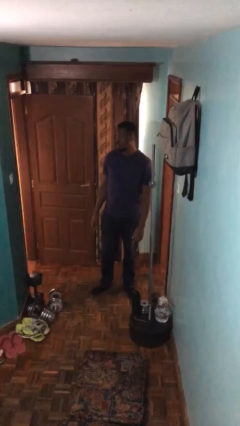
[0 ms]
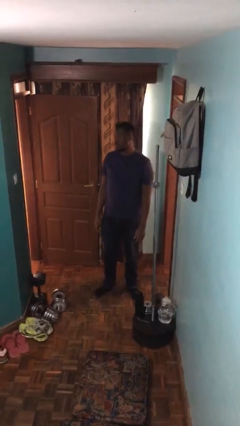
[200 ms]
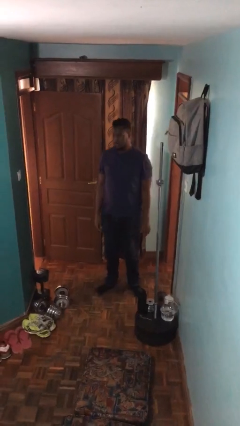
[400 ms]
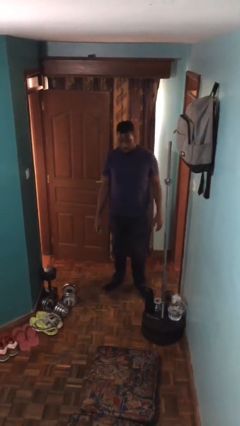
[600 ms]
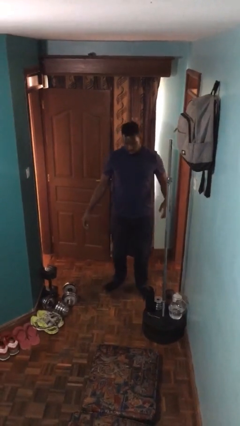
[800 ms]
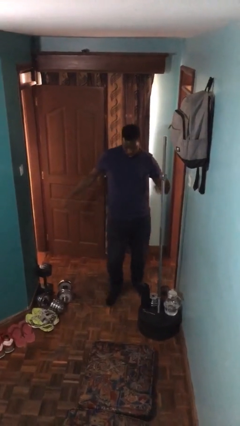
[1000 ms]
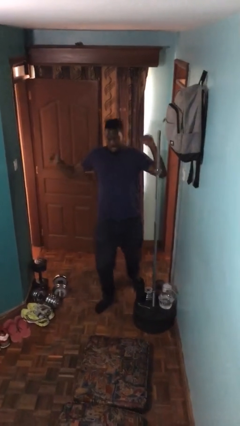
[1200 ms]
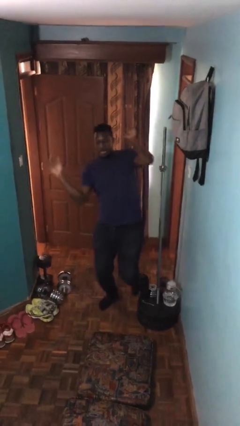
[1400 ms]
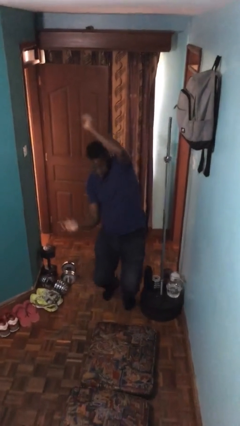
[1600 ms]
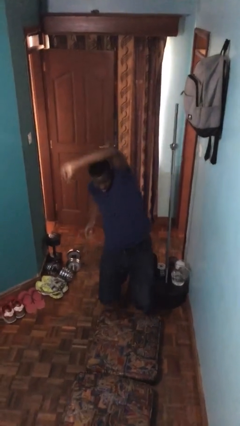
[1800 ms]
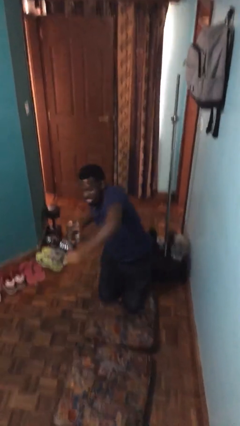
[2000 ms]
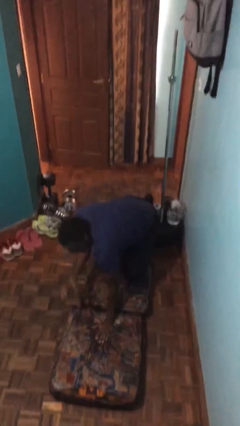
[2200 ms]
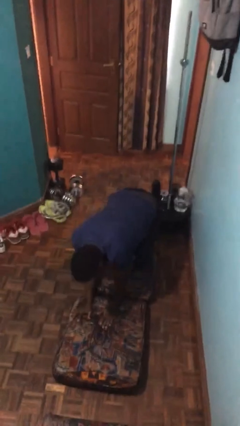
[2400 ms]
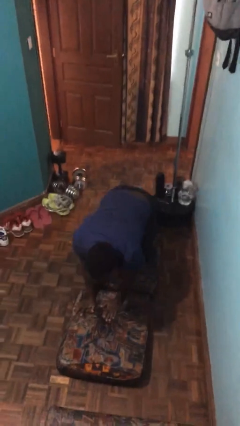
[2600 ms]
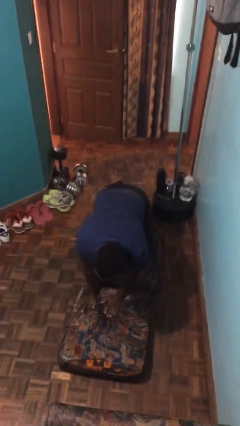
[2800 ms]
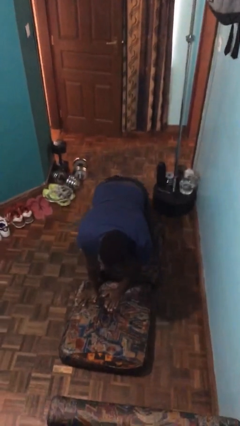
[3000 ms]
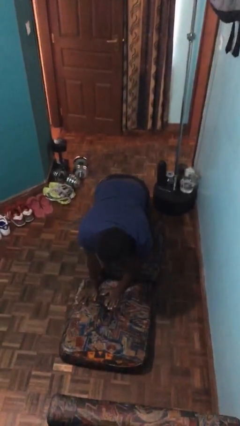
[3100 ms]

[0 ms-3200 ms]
person trips on object on floor

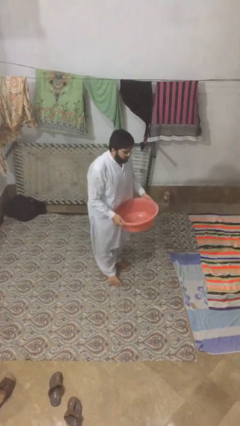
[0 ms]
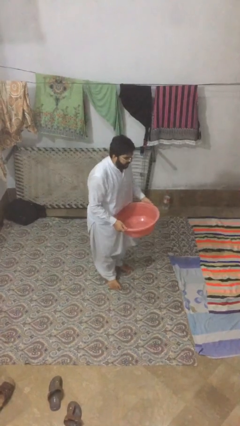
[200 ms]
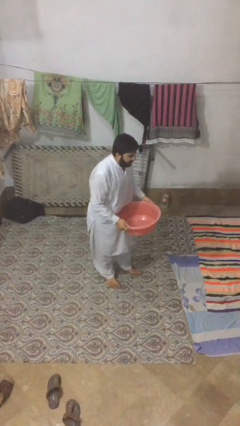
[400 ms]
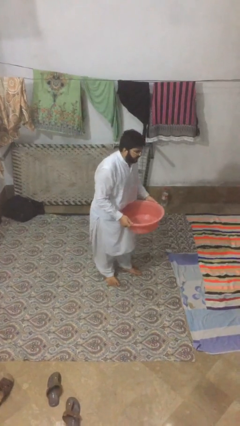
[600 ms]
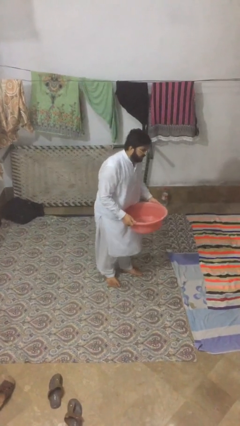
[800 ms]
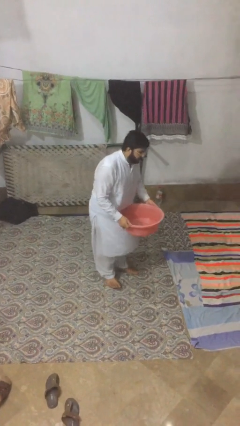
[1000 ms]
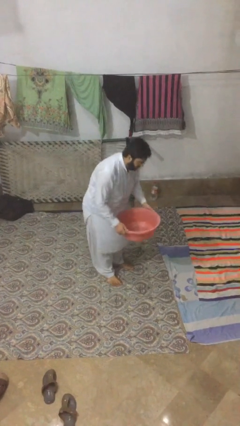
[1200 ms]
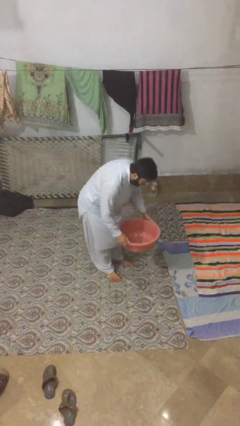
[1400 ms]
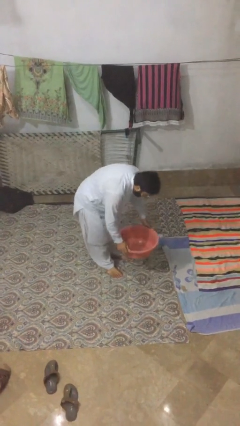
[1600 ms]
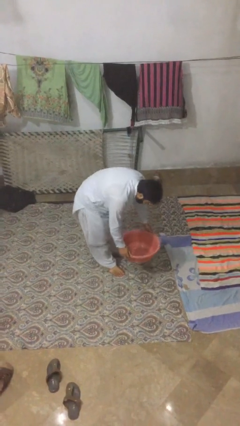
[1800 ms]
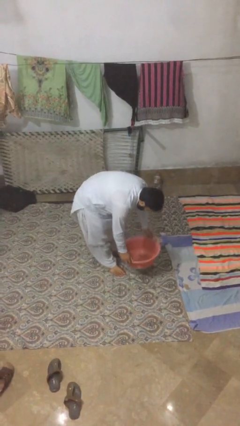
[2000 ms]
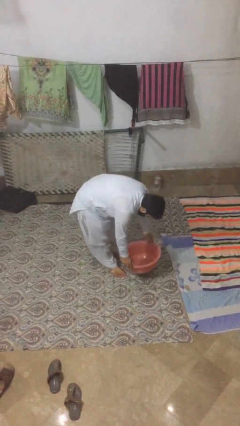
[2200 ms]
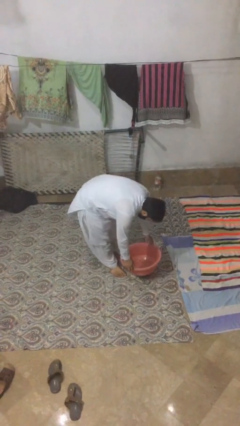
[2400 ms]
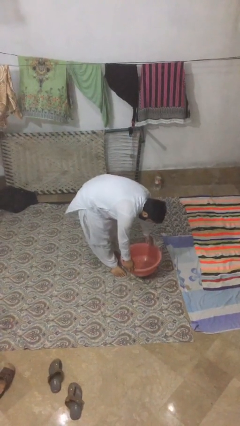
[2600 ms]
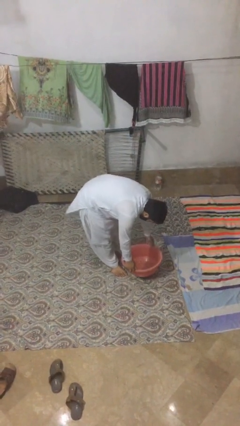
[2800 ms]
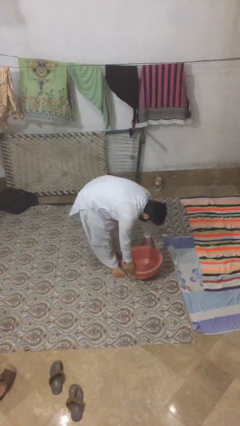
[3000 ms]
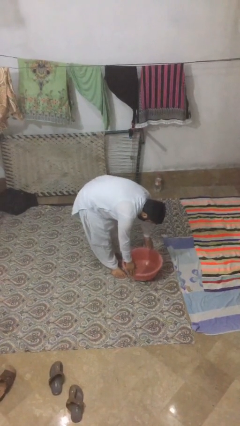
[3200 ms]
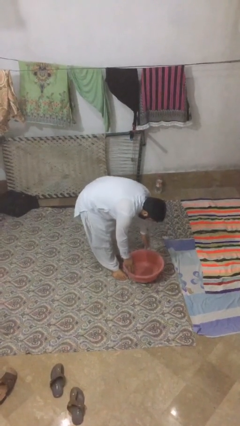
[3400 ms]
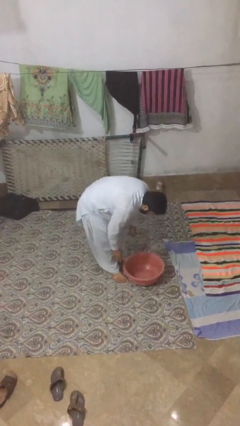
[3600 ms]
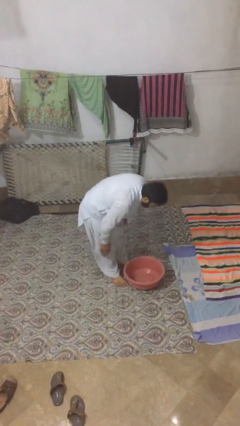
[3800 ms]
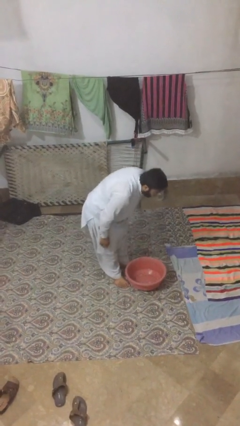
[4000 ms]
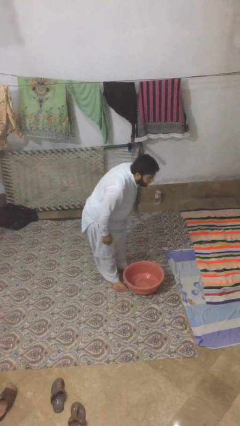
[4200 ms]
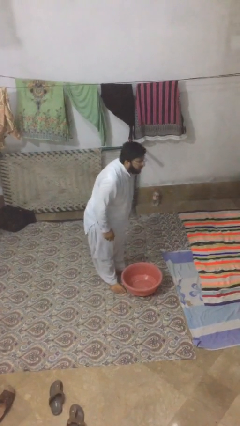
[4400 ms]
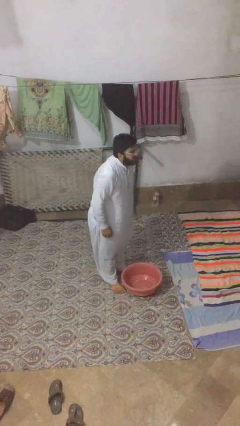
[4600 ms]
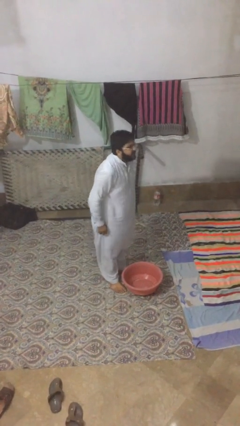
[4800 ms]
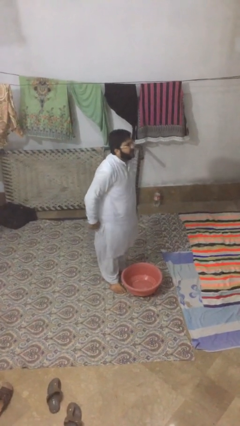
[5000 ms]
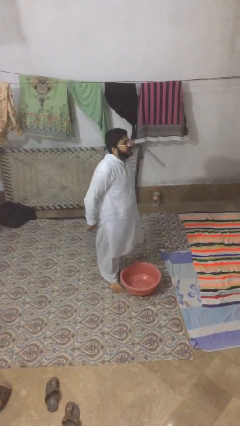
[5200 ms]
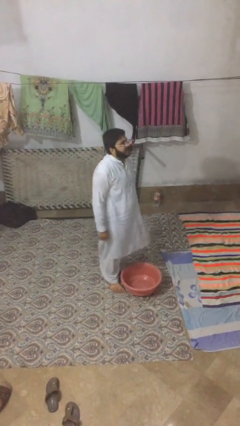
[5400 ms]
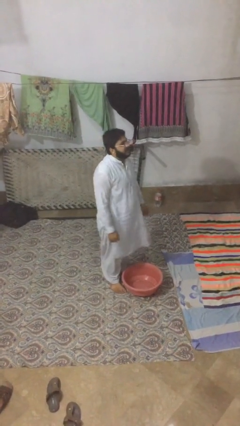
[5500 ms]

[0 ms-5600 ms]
person puts down object on floor

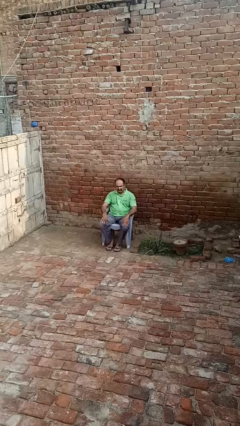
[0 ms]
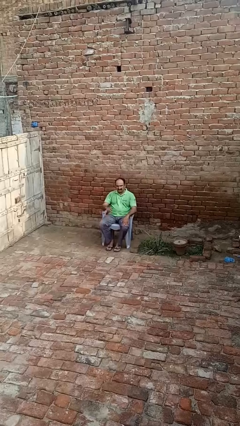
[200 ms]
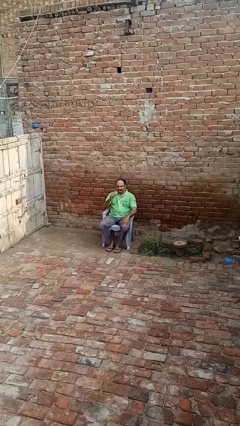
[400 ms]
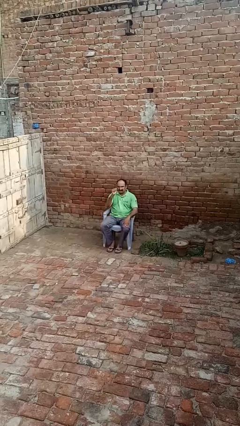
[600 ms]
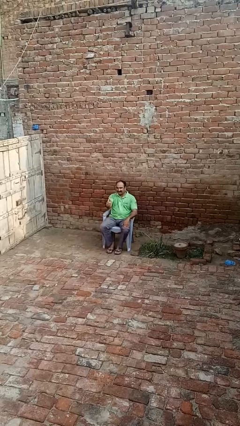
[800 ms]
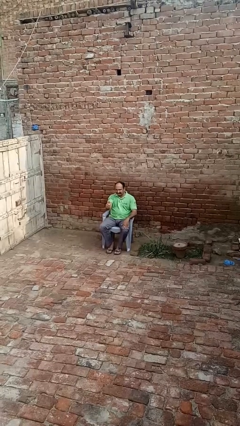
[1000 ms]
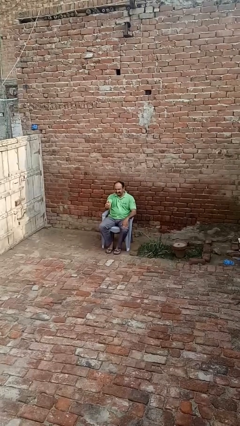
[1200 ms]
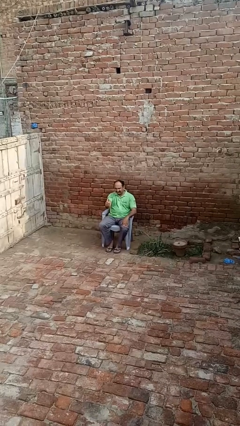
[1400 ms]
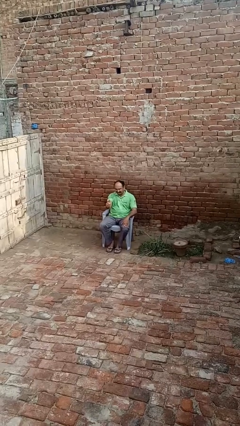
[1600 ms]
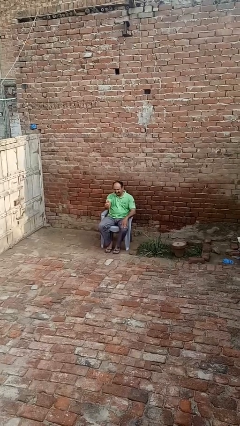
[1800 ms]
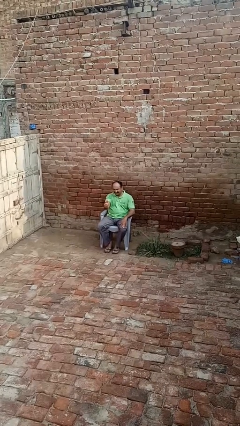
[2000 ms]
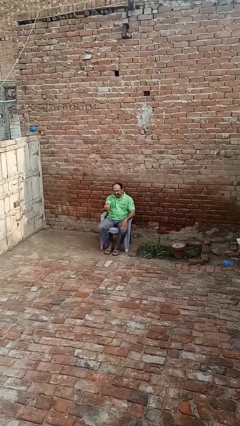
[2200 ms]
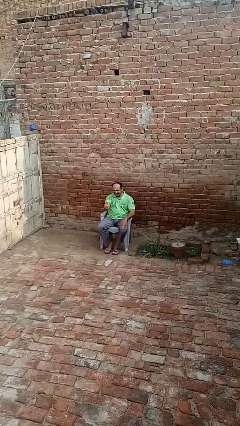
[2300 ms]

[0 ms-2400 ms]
person gestures thumbs up

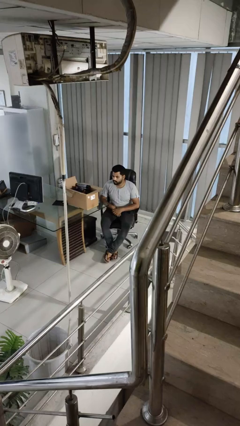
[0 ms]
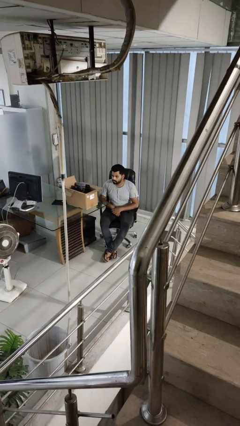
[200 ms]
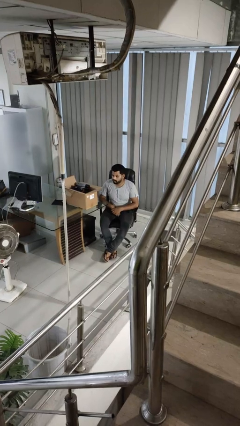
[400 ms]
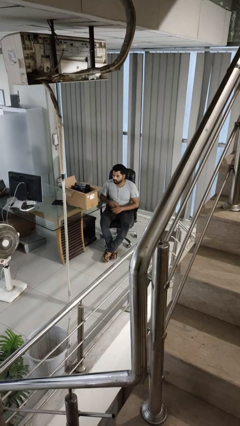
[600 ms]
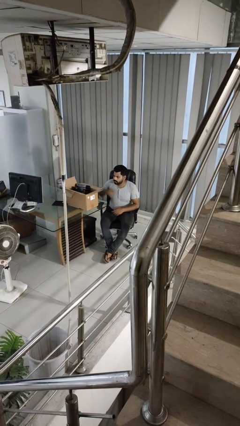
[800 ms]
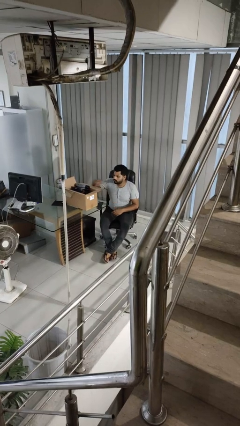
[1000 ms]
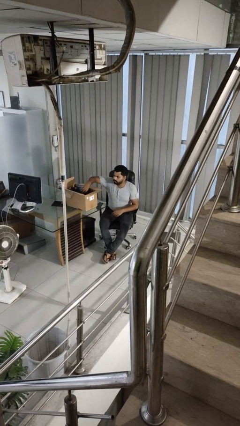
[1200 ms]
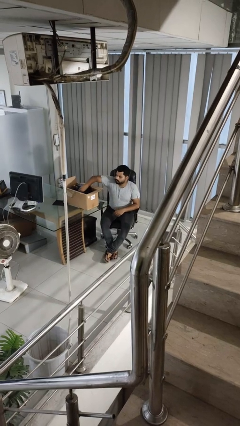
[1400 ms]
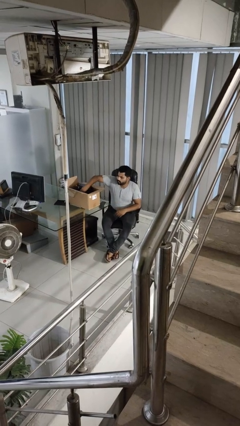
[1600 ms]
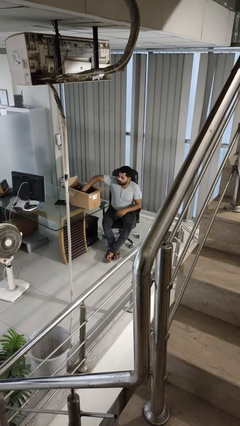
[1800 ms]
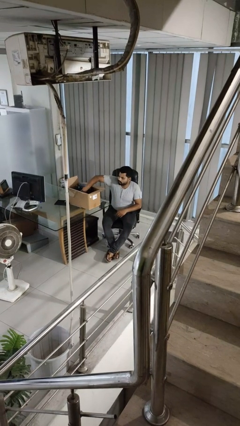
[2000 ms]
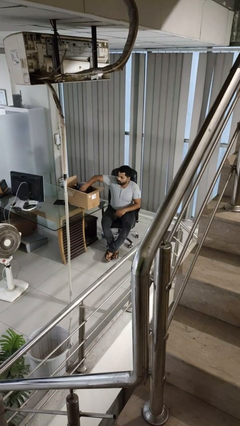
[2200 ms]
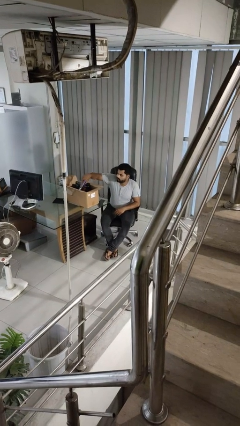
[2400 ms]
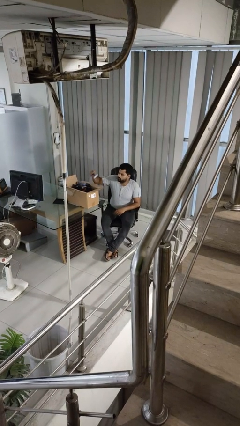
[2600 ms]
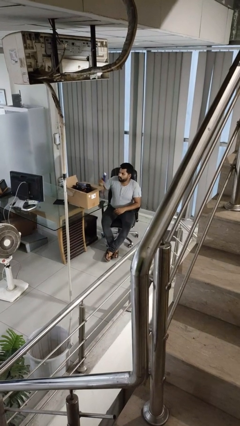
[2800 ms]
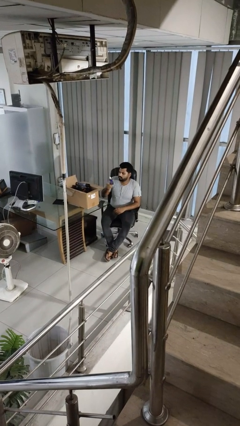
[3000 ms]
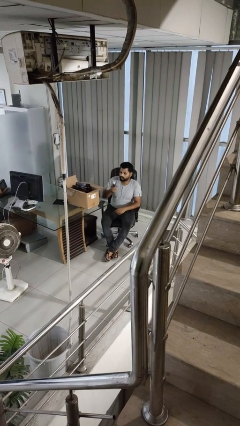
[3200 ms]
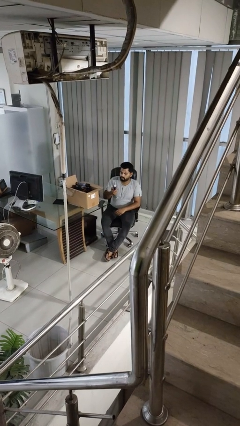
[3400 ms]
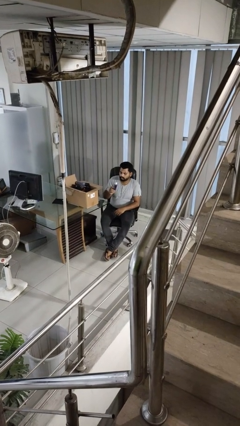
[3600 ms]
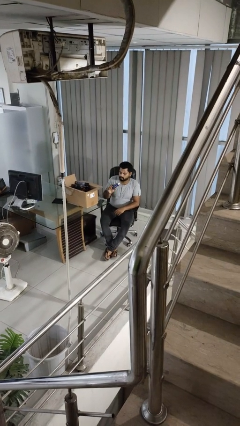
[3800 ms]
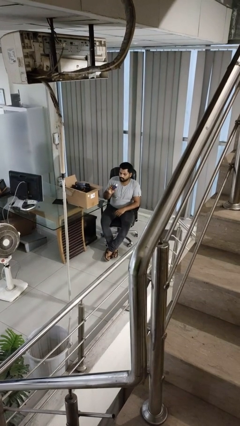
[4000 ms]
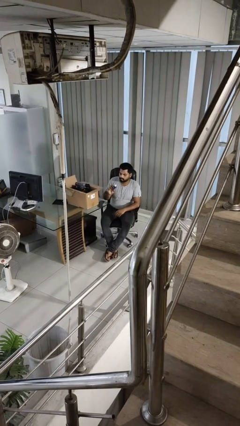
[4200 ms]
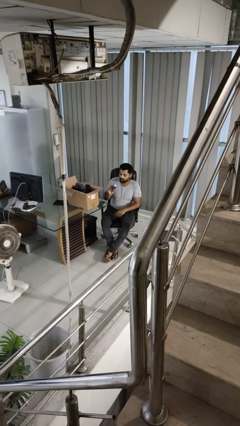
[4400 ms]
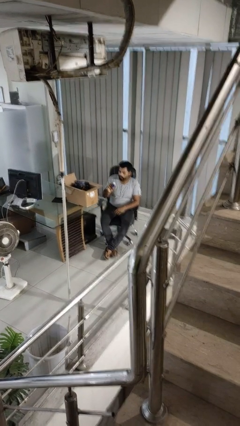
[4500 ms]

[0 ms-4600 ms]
person takes object from box

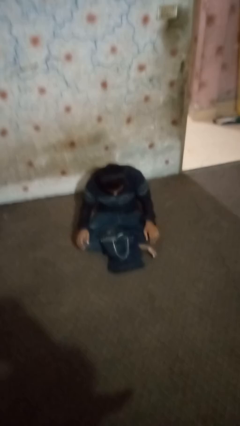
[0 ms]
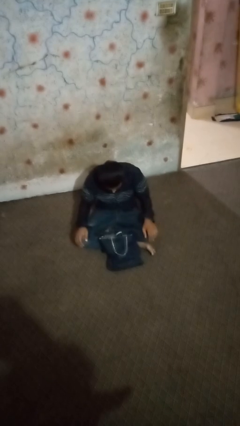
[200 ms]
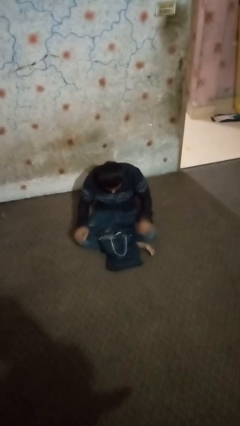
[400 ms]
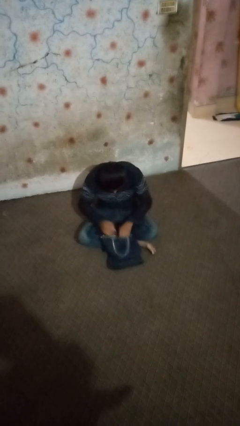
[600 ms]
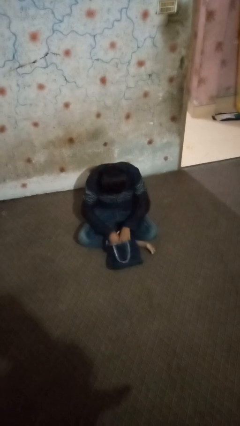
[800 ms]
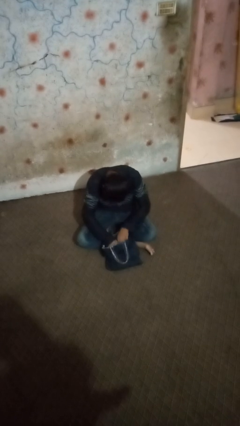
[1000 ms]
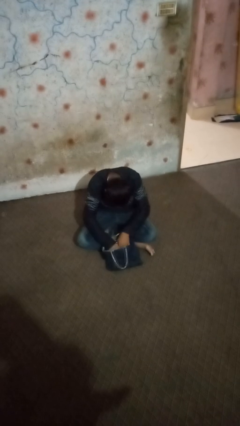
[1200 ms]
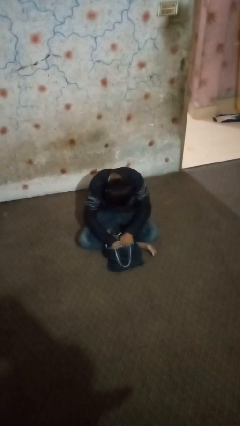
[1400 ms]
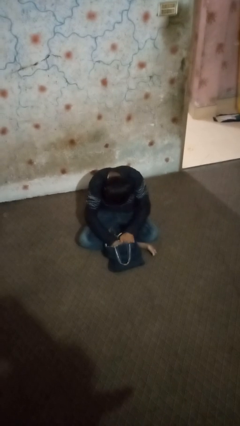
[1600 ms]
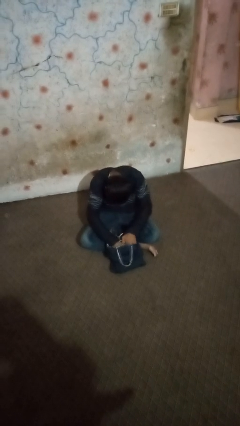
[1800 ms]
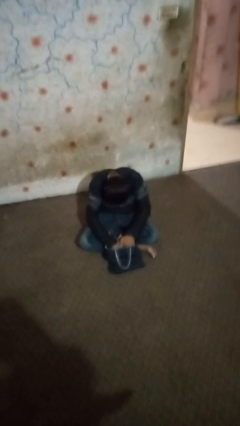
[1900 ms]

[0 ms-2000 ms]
person searches in bag
